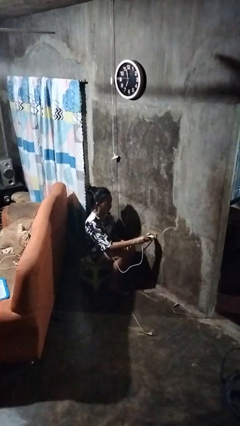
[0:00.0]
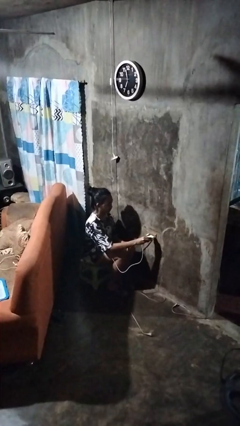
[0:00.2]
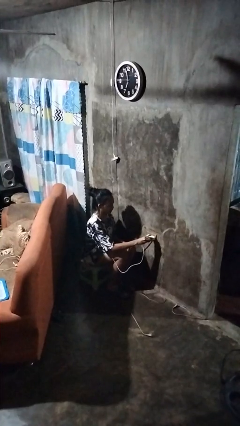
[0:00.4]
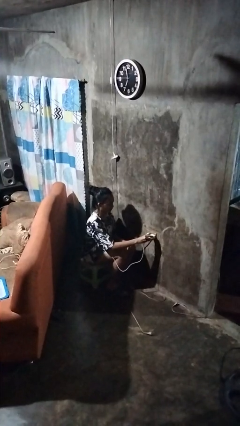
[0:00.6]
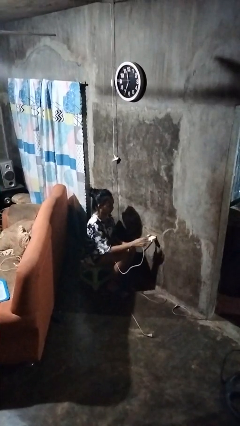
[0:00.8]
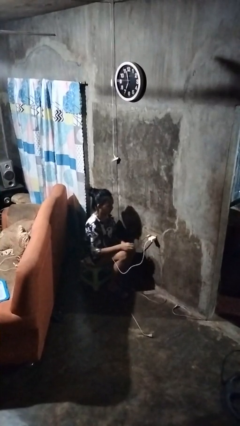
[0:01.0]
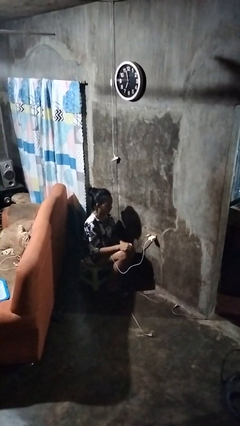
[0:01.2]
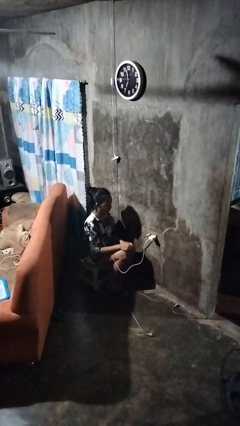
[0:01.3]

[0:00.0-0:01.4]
person plugs into electrical socket

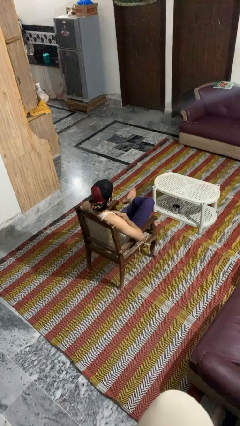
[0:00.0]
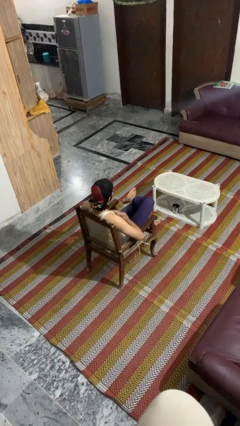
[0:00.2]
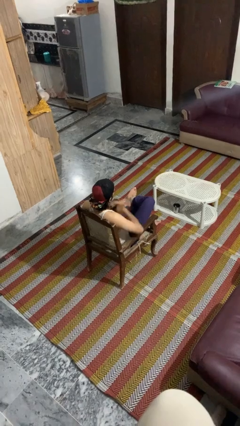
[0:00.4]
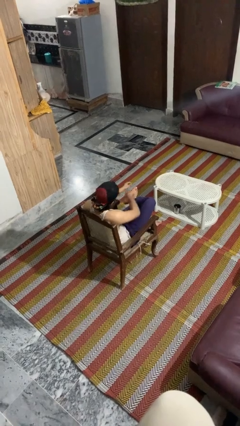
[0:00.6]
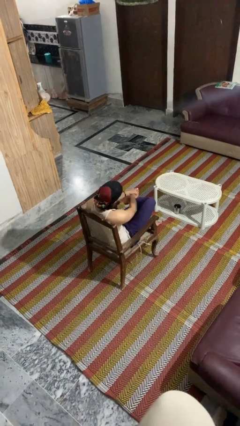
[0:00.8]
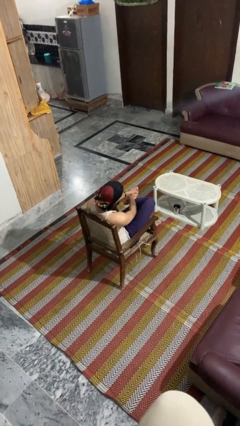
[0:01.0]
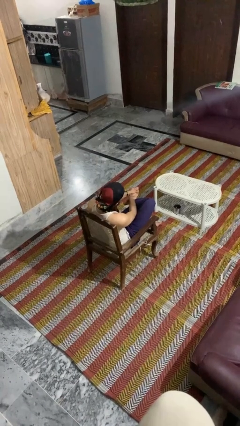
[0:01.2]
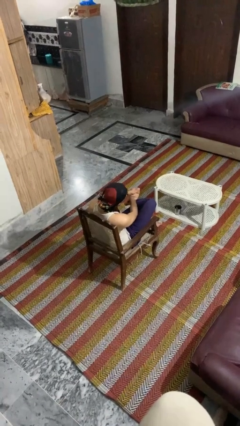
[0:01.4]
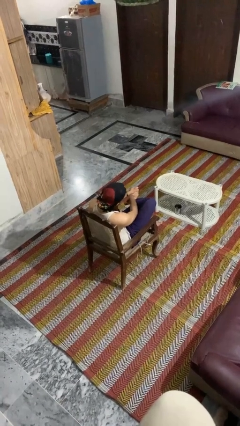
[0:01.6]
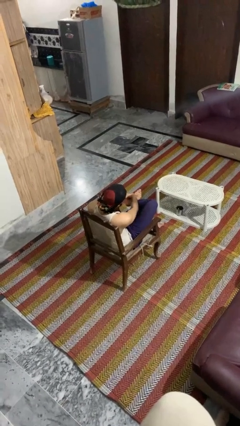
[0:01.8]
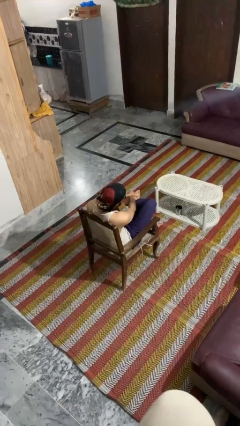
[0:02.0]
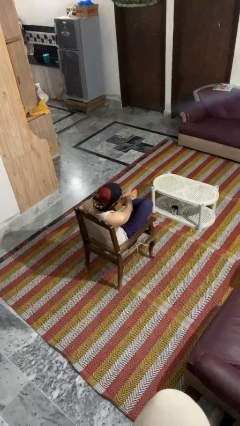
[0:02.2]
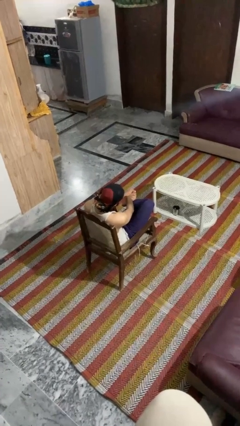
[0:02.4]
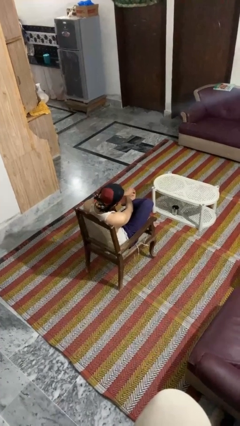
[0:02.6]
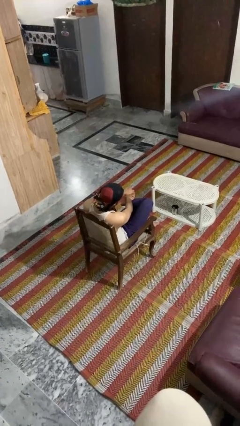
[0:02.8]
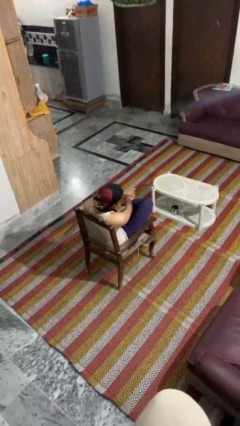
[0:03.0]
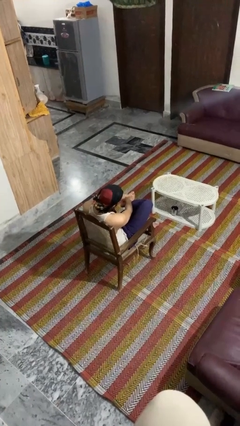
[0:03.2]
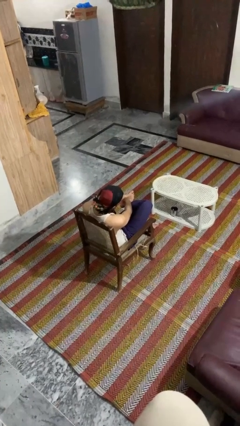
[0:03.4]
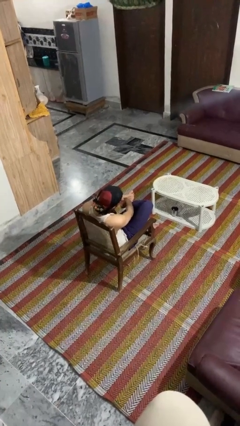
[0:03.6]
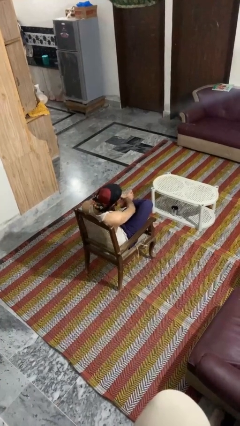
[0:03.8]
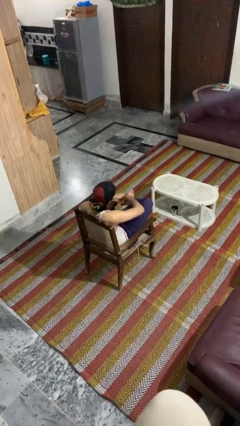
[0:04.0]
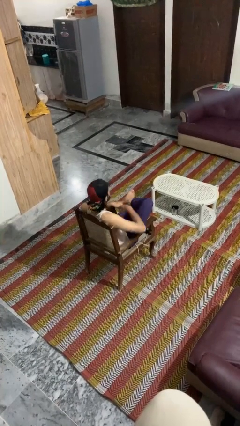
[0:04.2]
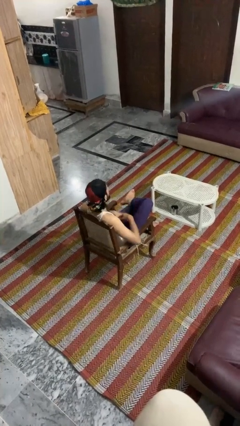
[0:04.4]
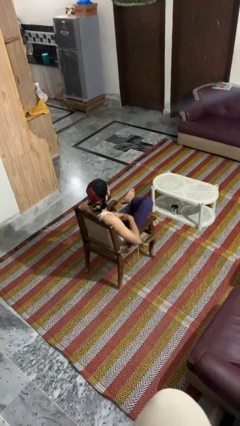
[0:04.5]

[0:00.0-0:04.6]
person rubs foot

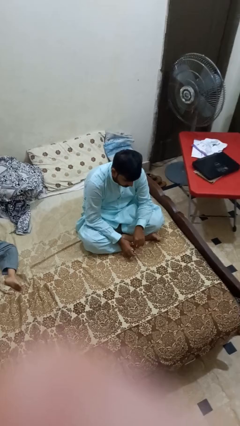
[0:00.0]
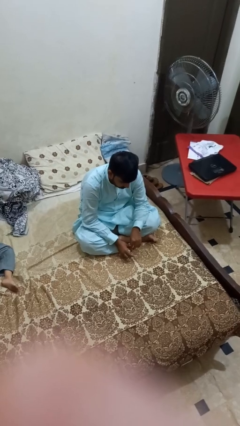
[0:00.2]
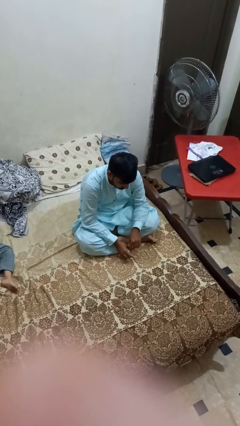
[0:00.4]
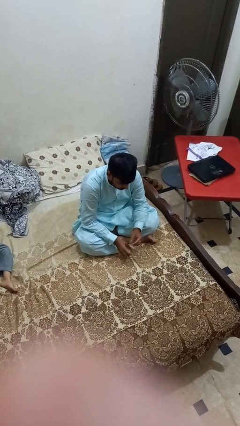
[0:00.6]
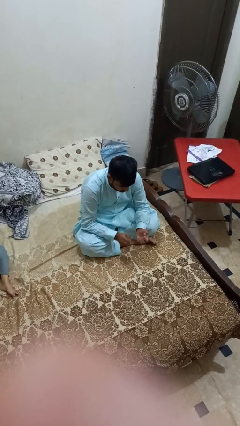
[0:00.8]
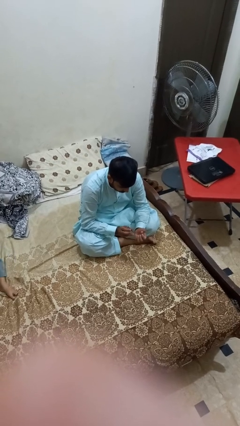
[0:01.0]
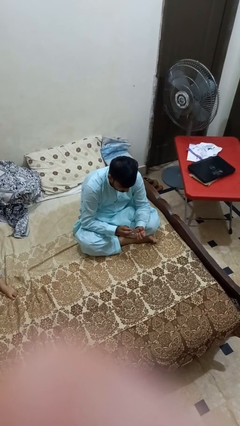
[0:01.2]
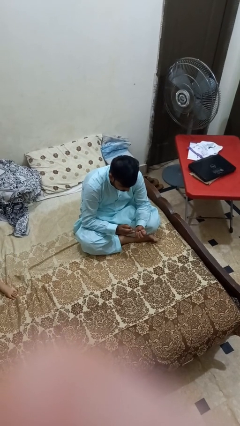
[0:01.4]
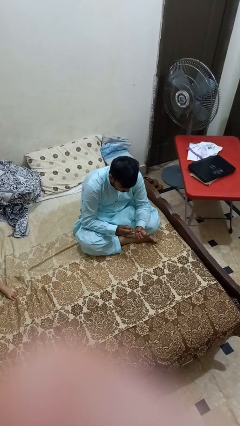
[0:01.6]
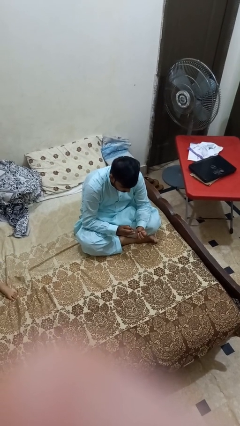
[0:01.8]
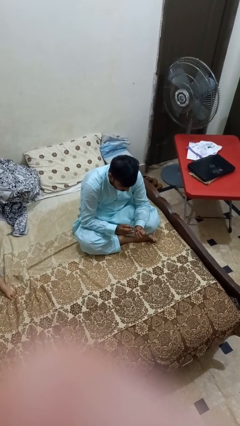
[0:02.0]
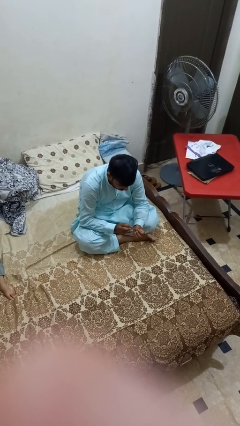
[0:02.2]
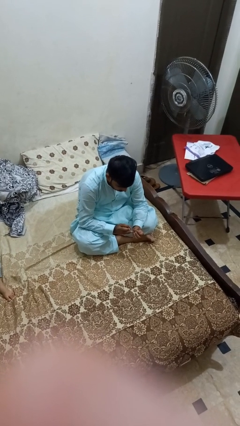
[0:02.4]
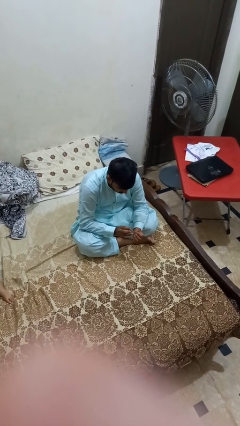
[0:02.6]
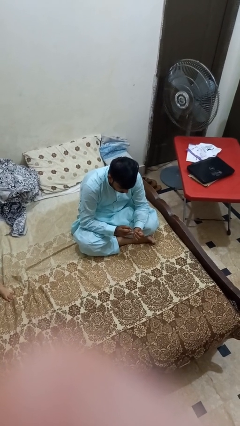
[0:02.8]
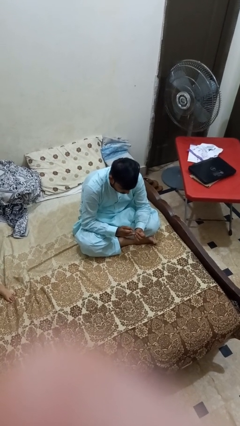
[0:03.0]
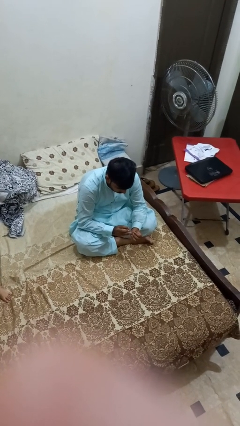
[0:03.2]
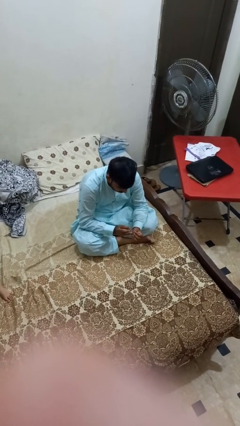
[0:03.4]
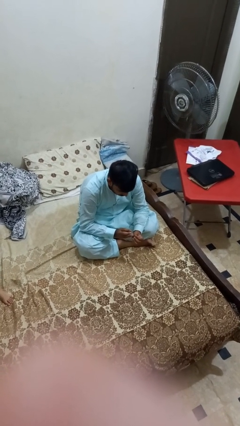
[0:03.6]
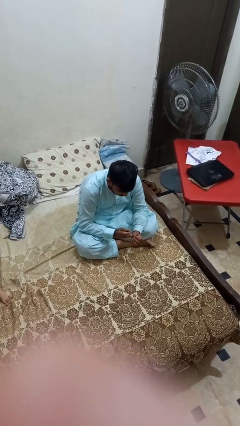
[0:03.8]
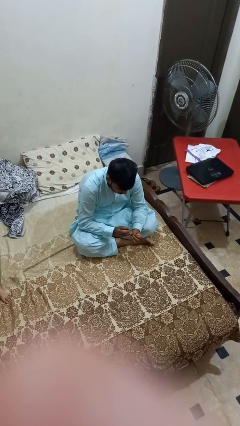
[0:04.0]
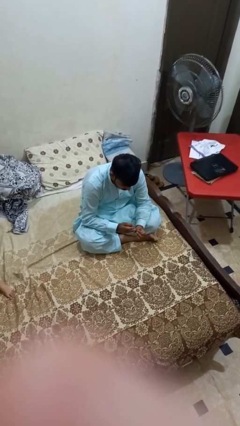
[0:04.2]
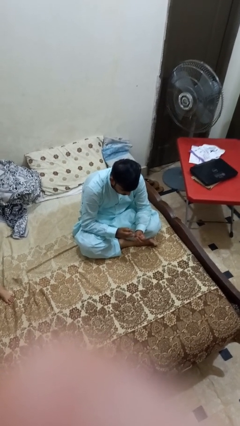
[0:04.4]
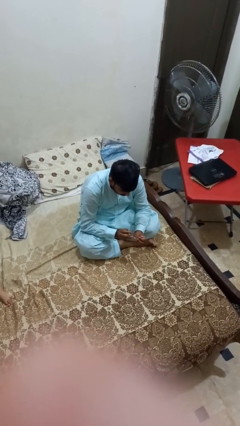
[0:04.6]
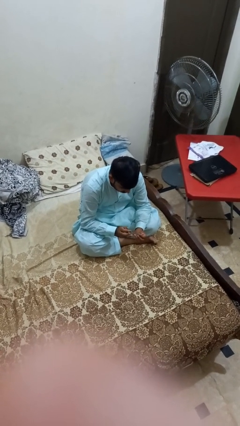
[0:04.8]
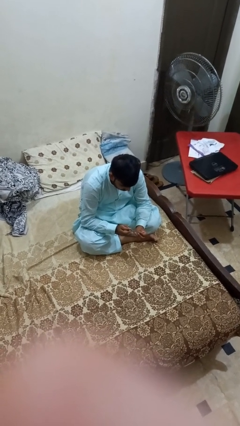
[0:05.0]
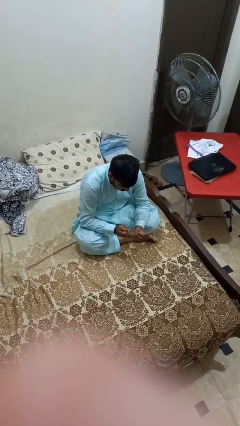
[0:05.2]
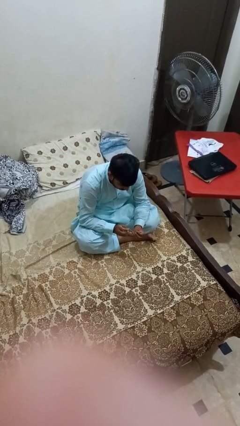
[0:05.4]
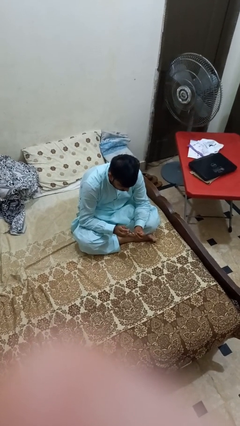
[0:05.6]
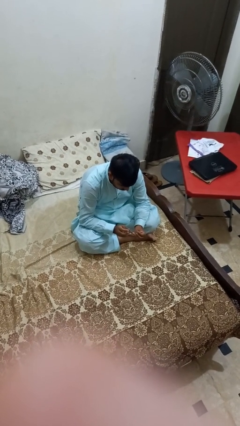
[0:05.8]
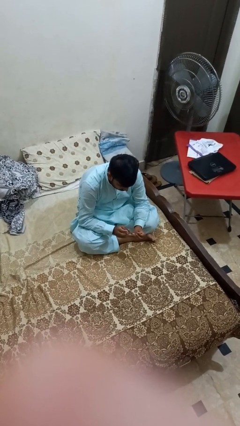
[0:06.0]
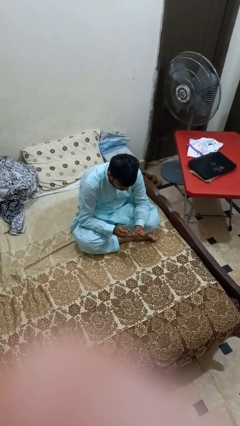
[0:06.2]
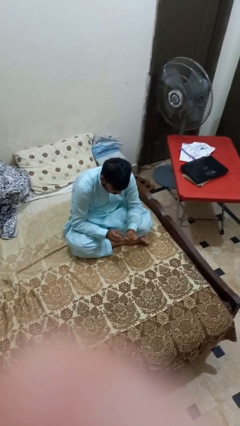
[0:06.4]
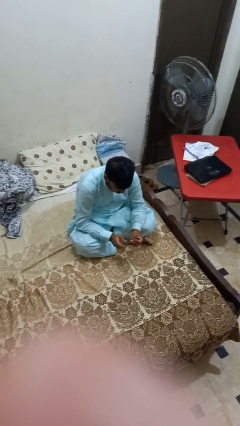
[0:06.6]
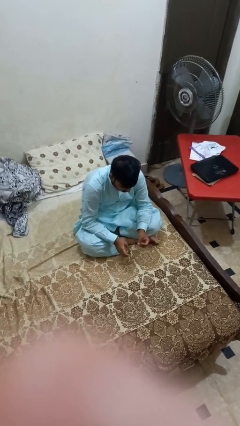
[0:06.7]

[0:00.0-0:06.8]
person clips fingernails

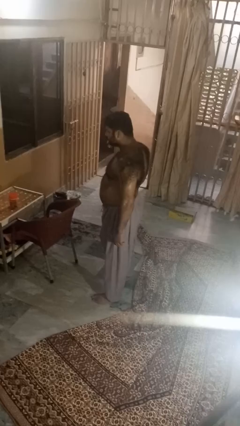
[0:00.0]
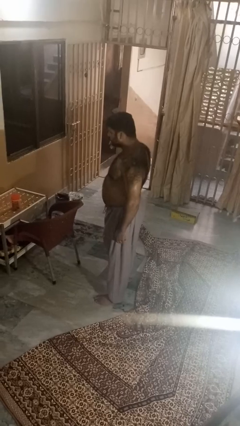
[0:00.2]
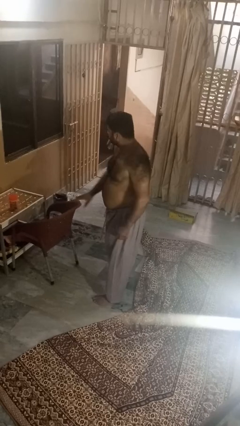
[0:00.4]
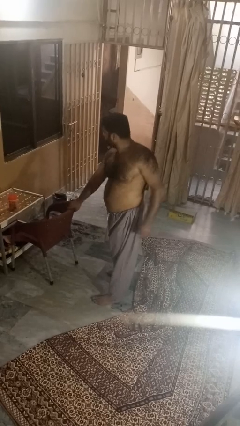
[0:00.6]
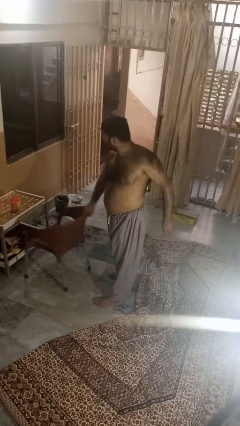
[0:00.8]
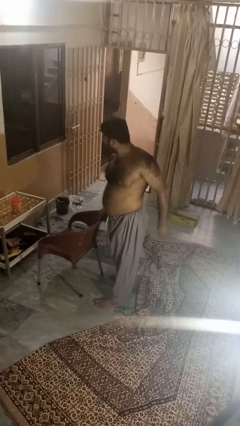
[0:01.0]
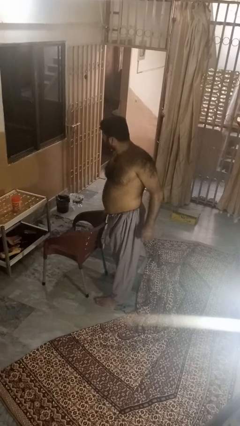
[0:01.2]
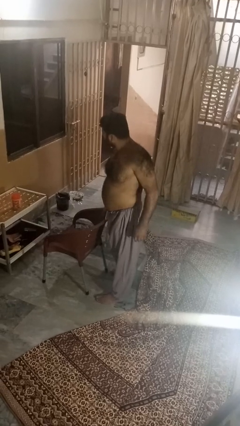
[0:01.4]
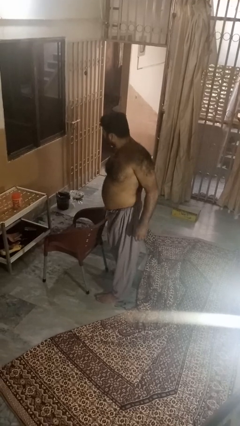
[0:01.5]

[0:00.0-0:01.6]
person pulls out chair

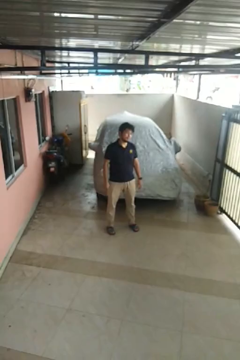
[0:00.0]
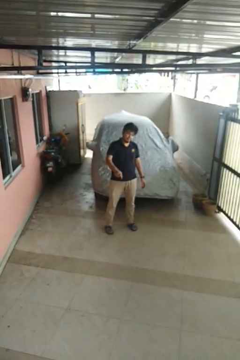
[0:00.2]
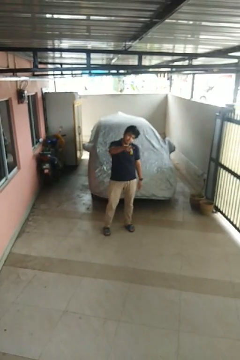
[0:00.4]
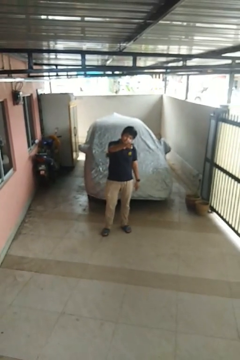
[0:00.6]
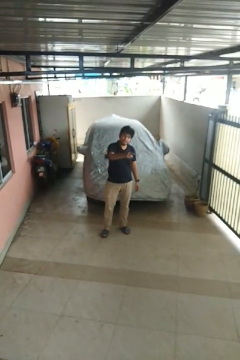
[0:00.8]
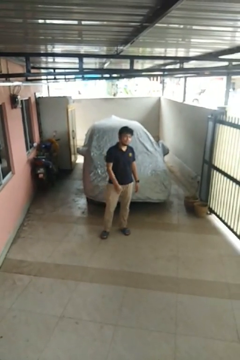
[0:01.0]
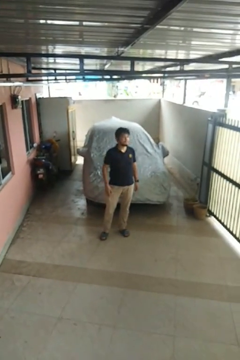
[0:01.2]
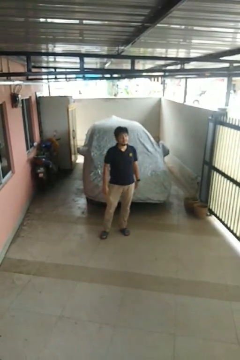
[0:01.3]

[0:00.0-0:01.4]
person points at person

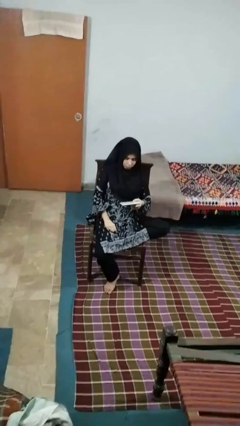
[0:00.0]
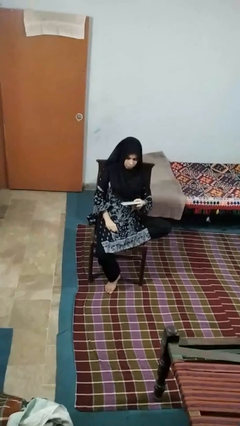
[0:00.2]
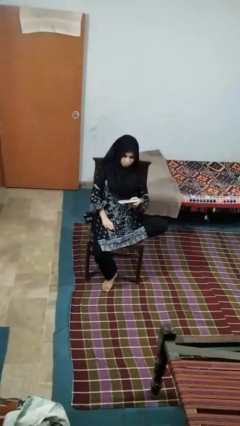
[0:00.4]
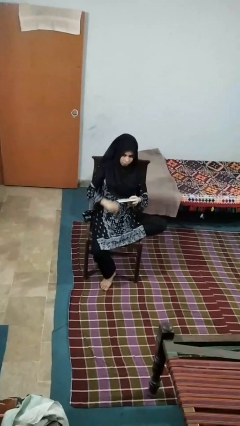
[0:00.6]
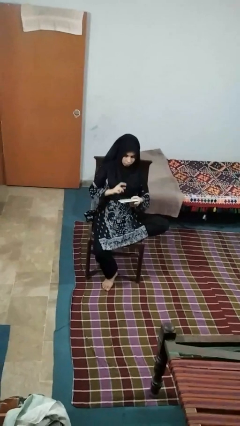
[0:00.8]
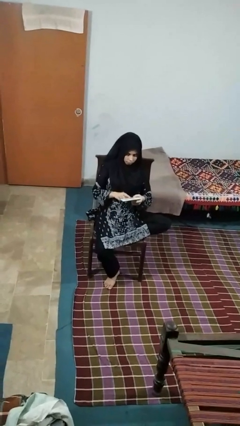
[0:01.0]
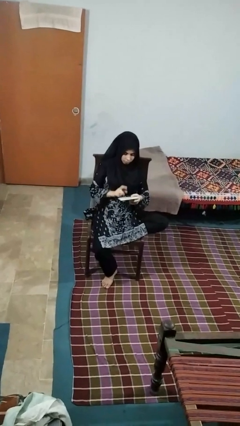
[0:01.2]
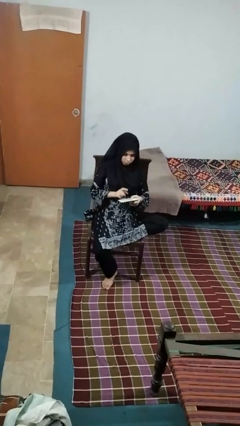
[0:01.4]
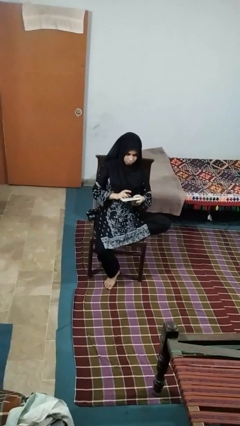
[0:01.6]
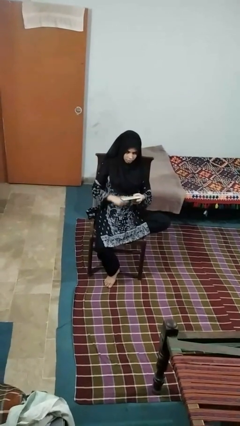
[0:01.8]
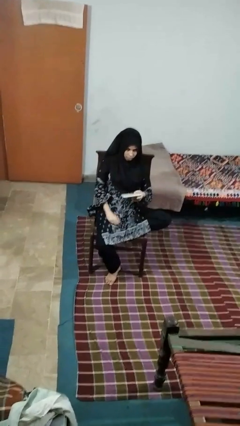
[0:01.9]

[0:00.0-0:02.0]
person taps object with finger
